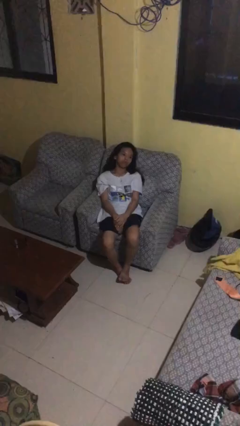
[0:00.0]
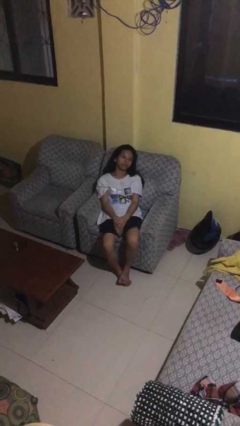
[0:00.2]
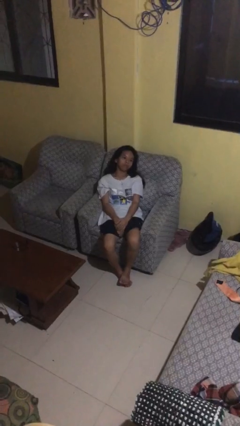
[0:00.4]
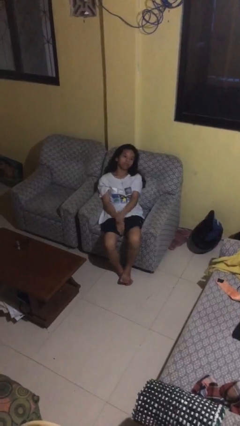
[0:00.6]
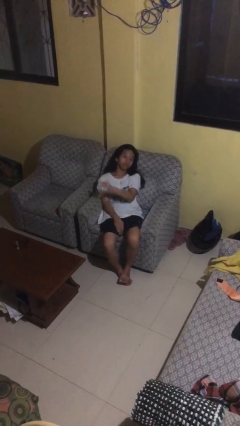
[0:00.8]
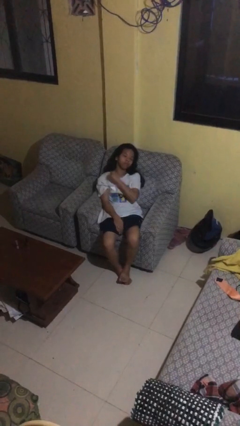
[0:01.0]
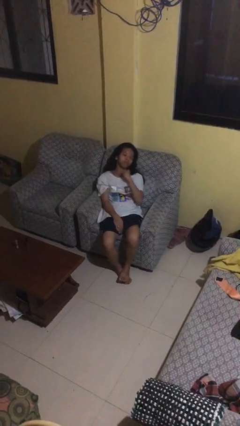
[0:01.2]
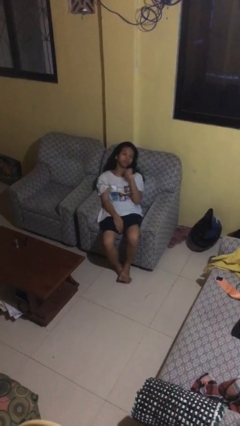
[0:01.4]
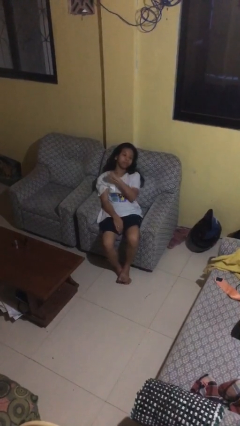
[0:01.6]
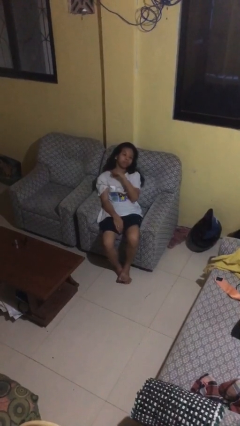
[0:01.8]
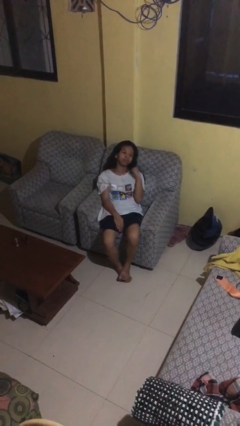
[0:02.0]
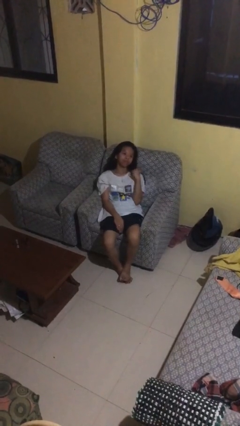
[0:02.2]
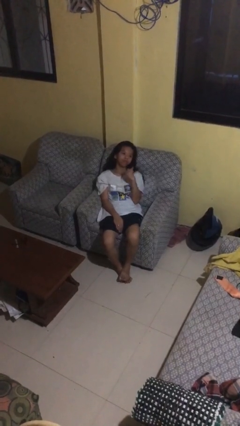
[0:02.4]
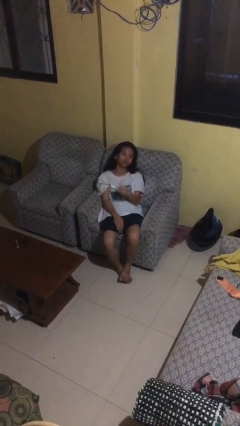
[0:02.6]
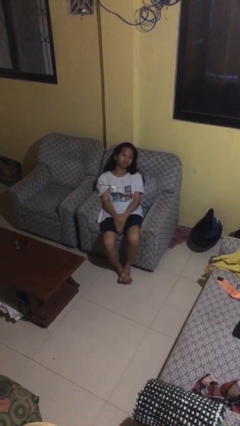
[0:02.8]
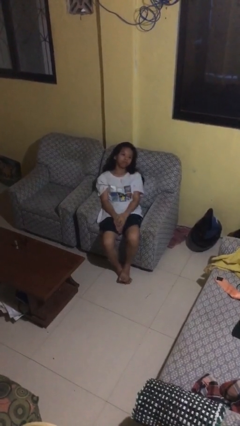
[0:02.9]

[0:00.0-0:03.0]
person gestures cut

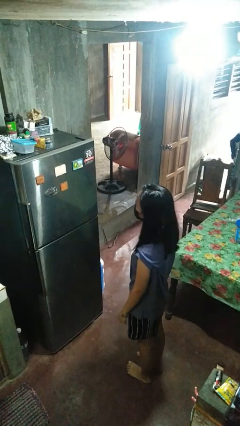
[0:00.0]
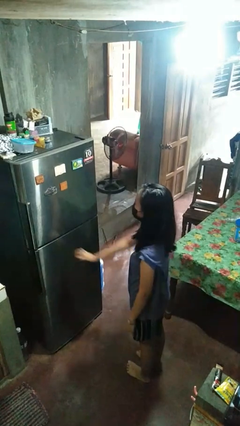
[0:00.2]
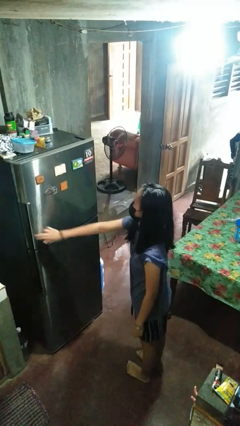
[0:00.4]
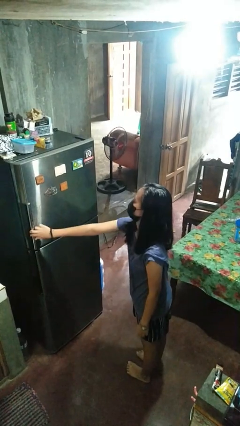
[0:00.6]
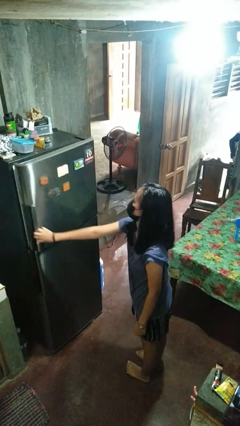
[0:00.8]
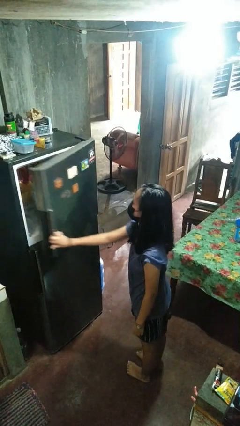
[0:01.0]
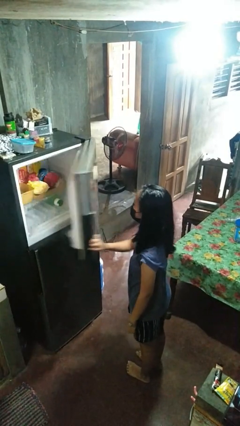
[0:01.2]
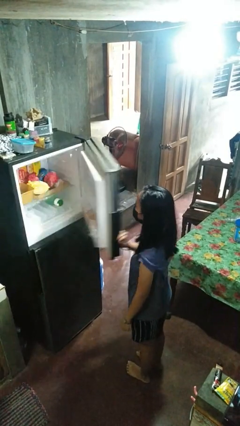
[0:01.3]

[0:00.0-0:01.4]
person opens refrigerator

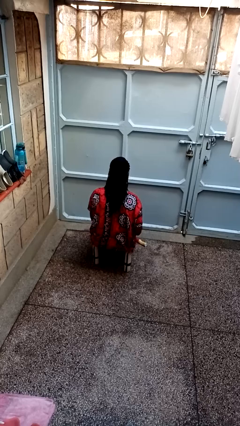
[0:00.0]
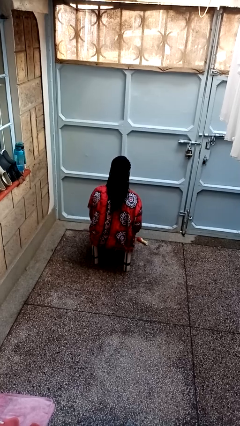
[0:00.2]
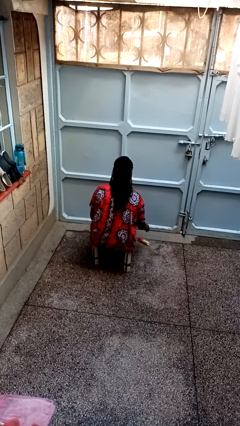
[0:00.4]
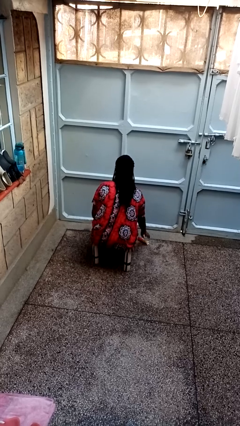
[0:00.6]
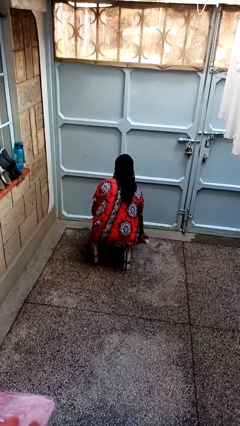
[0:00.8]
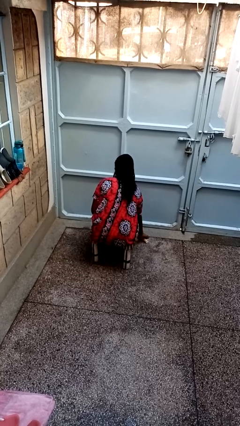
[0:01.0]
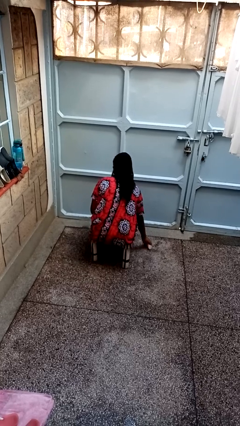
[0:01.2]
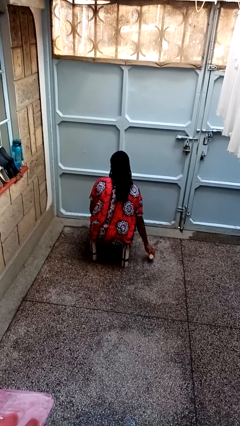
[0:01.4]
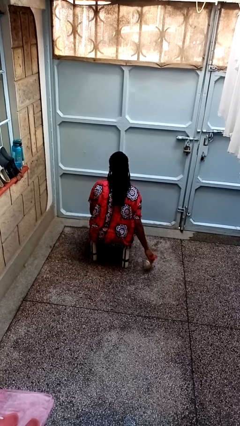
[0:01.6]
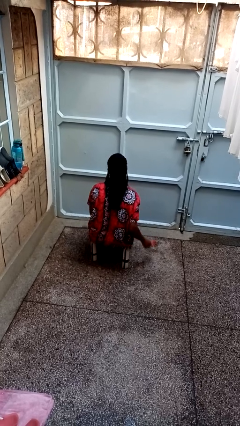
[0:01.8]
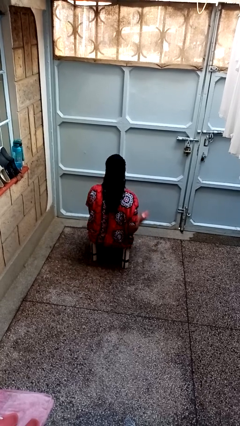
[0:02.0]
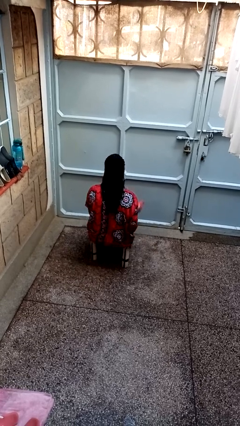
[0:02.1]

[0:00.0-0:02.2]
person picks up object from floor

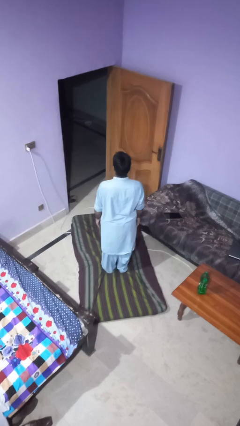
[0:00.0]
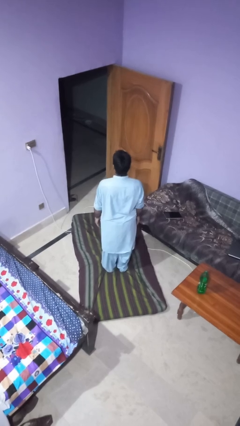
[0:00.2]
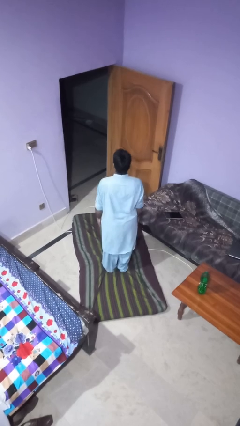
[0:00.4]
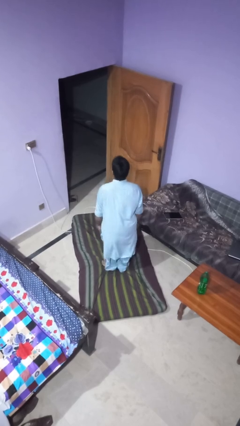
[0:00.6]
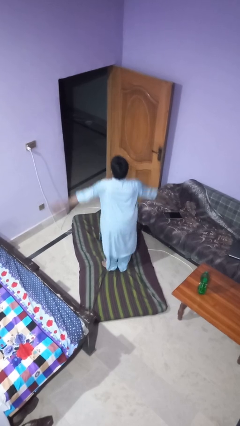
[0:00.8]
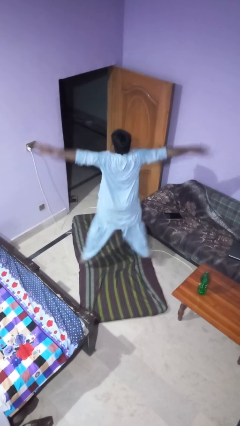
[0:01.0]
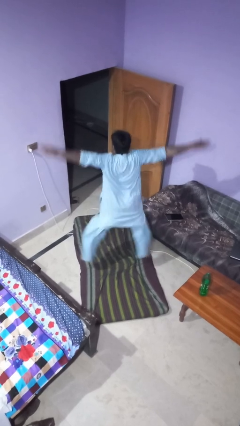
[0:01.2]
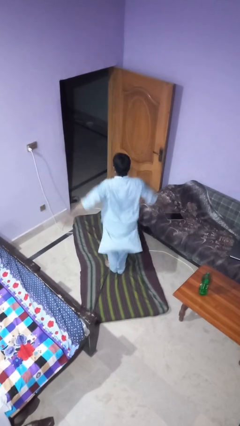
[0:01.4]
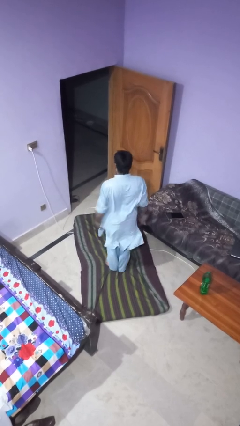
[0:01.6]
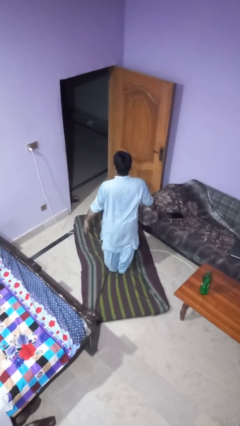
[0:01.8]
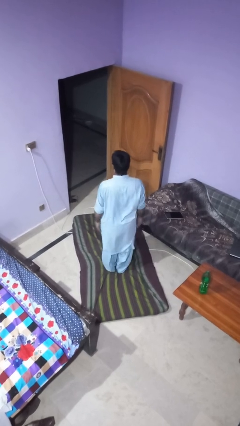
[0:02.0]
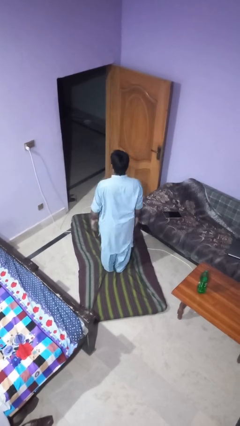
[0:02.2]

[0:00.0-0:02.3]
person exercises with jumping jacks

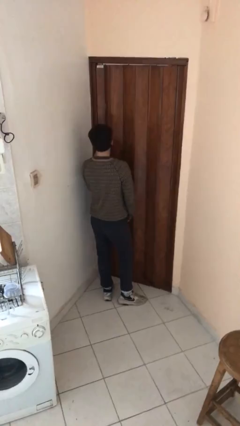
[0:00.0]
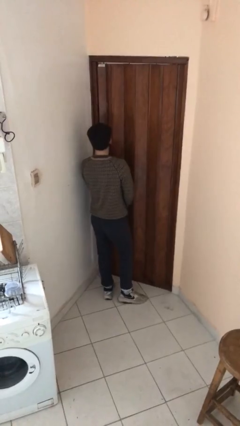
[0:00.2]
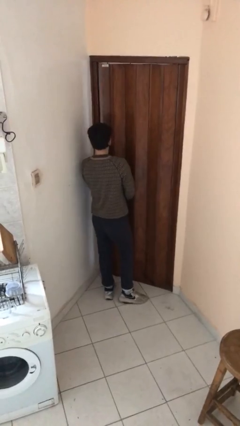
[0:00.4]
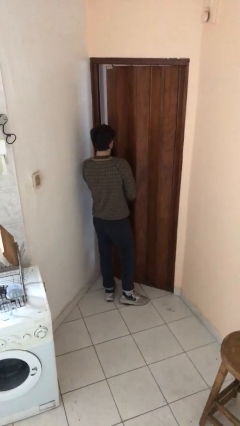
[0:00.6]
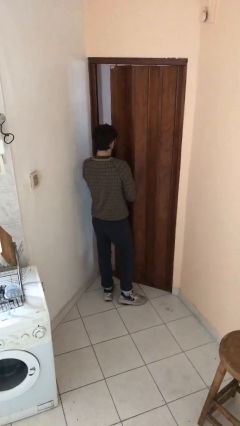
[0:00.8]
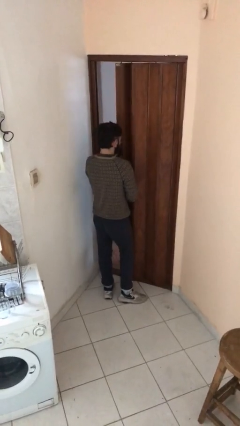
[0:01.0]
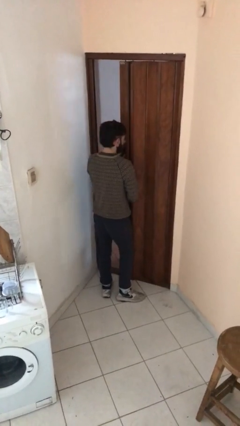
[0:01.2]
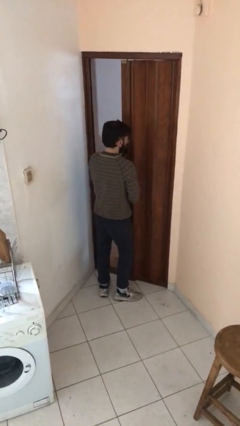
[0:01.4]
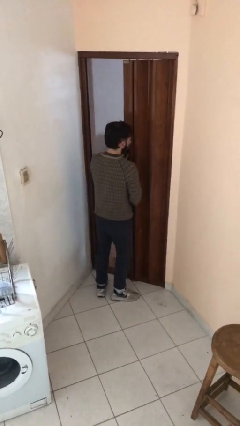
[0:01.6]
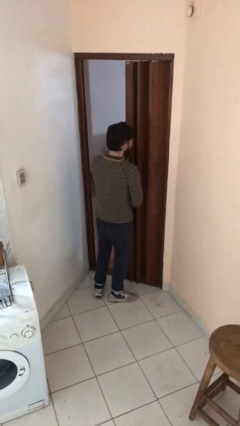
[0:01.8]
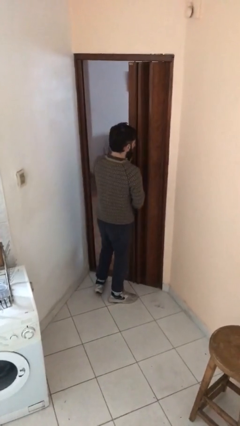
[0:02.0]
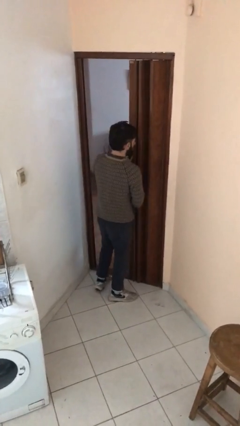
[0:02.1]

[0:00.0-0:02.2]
person opens sliding door

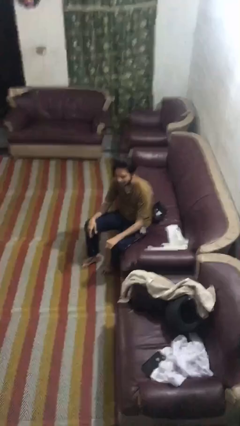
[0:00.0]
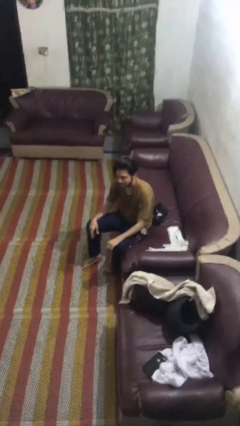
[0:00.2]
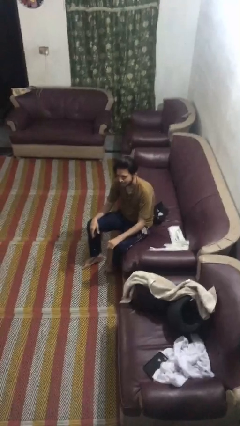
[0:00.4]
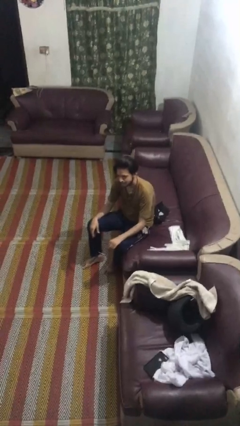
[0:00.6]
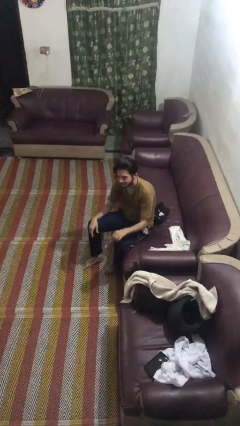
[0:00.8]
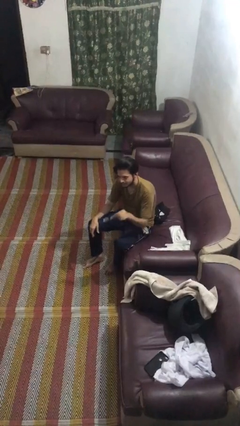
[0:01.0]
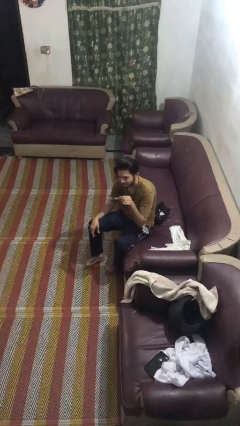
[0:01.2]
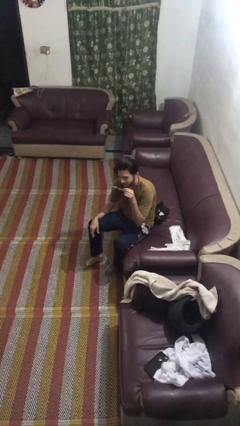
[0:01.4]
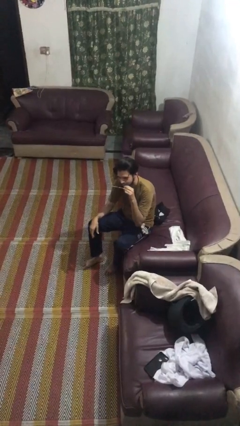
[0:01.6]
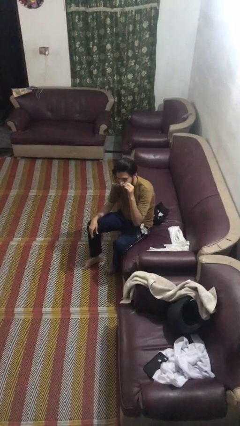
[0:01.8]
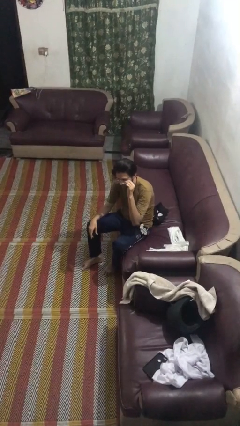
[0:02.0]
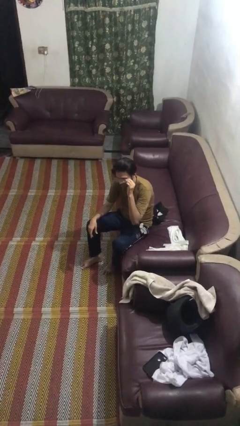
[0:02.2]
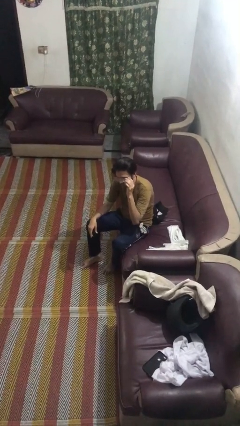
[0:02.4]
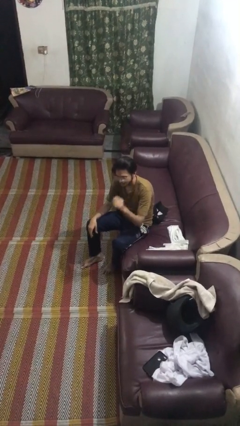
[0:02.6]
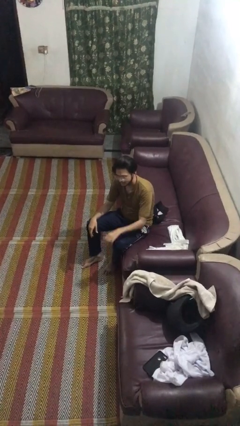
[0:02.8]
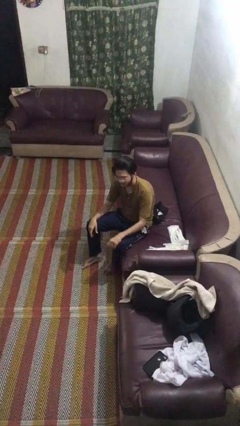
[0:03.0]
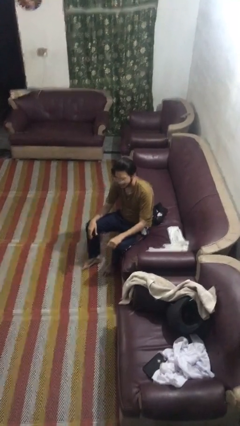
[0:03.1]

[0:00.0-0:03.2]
person puts on glasses

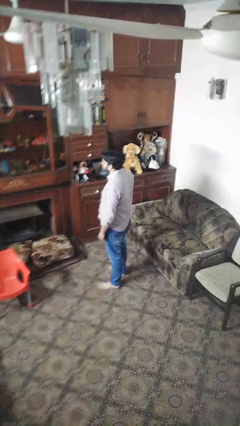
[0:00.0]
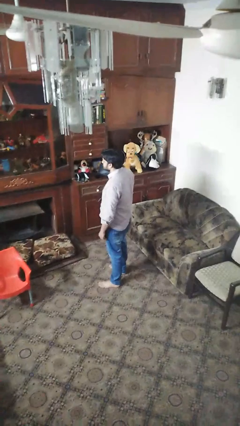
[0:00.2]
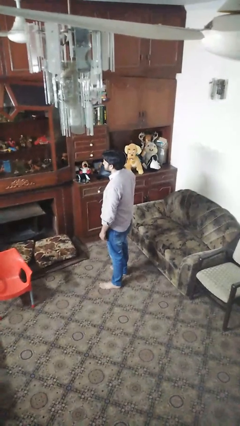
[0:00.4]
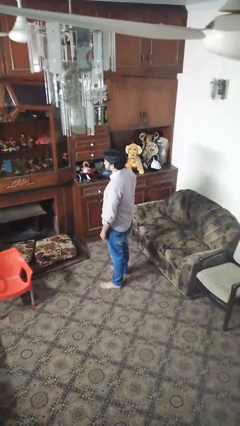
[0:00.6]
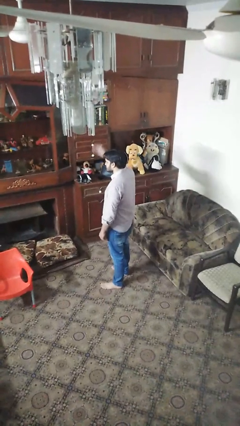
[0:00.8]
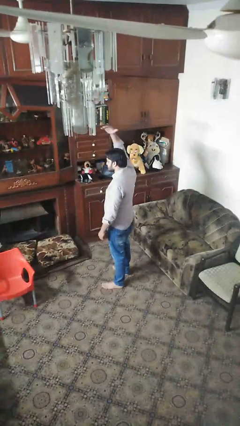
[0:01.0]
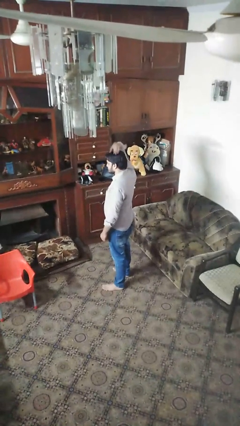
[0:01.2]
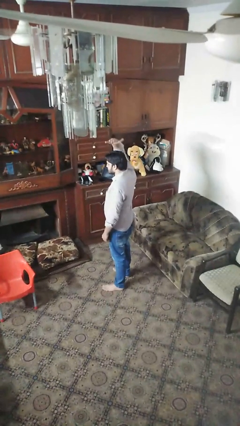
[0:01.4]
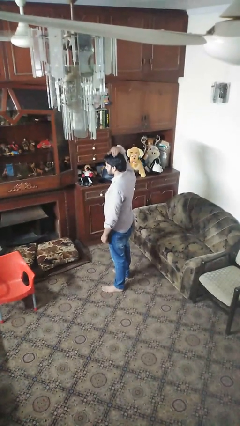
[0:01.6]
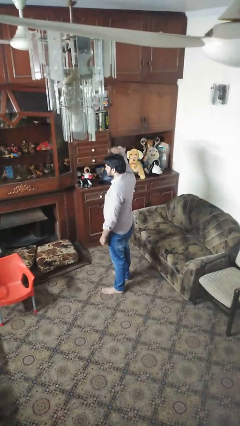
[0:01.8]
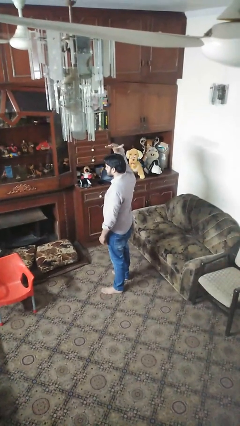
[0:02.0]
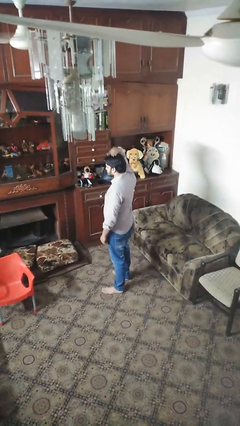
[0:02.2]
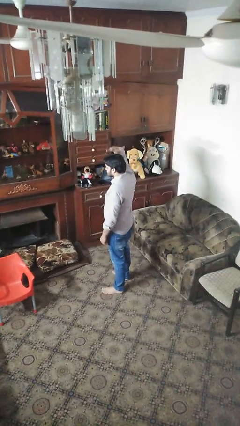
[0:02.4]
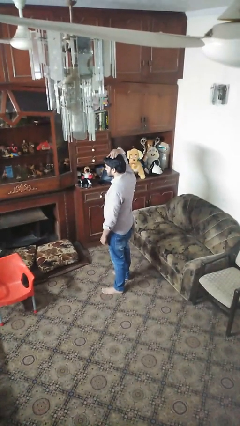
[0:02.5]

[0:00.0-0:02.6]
person pats head
